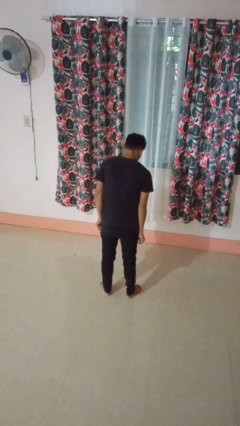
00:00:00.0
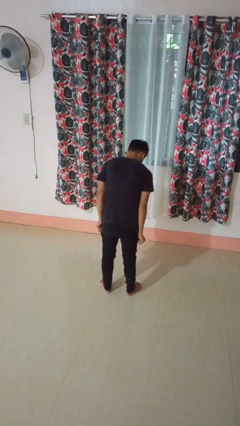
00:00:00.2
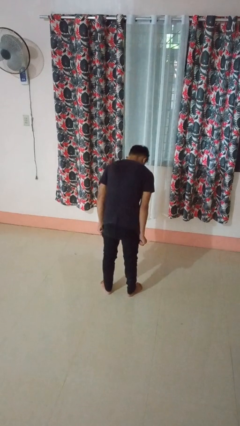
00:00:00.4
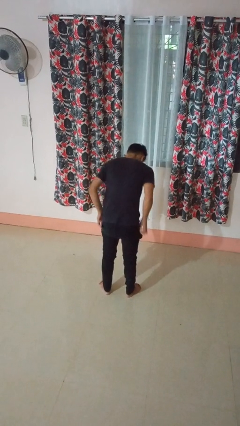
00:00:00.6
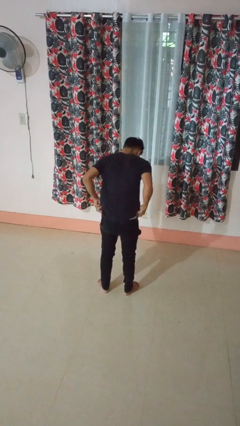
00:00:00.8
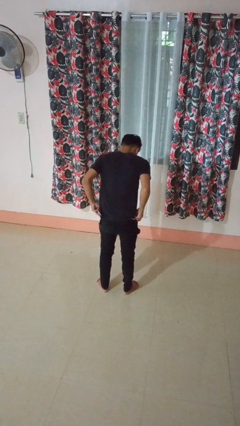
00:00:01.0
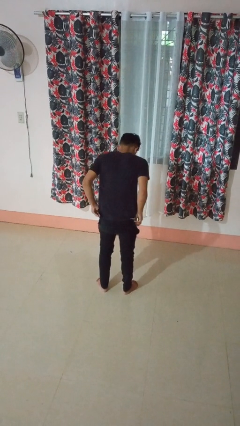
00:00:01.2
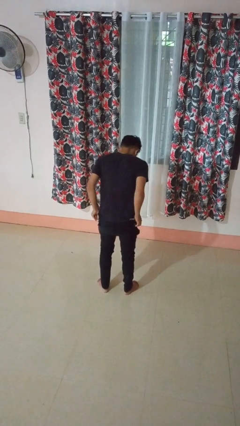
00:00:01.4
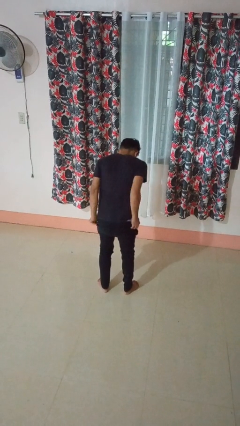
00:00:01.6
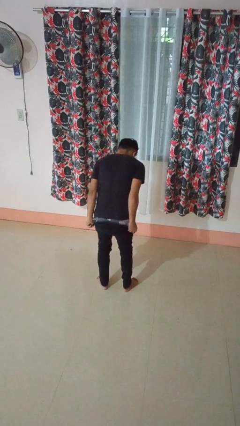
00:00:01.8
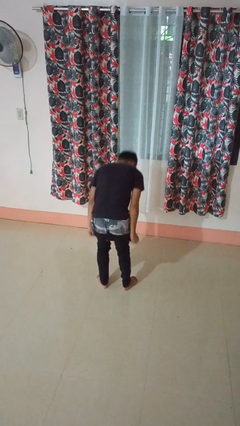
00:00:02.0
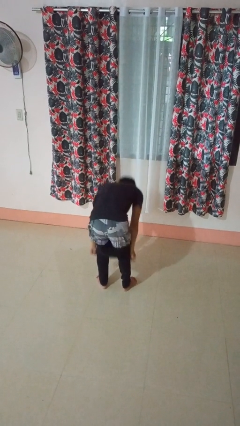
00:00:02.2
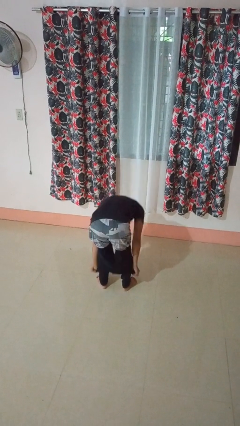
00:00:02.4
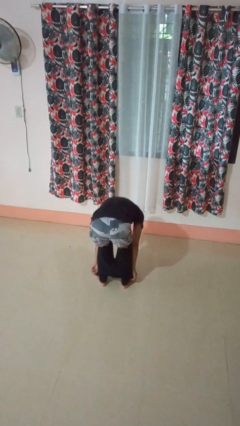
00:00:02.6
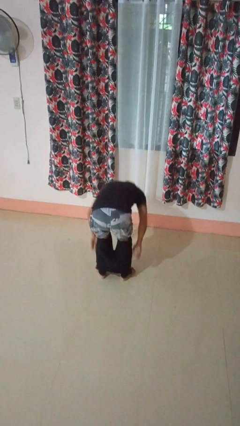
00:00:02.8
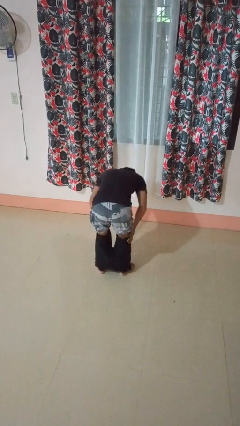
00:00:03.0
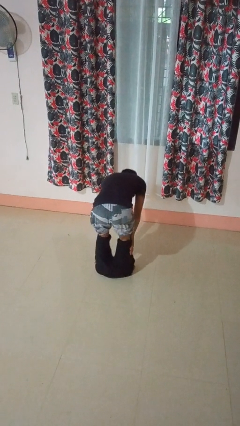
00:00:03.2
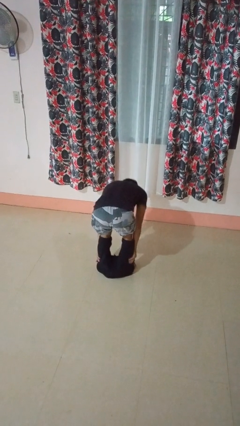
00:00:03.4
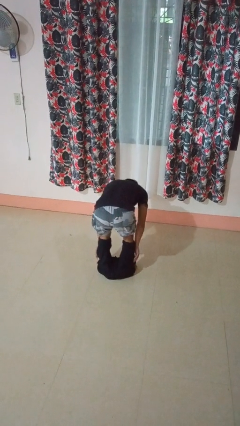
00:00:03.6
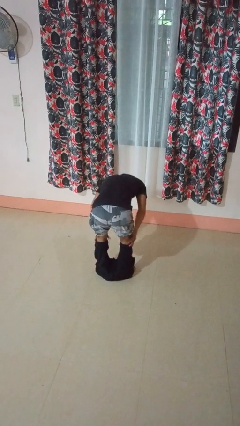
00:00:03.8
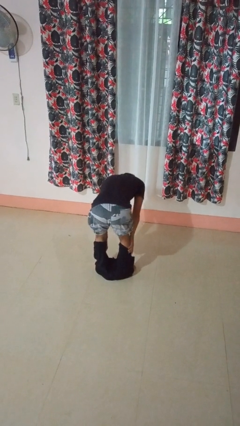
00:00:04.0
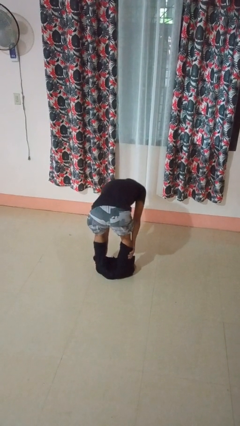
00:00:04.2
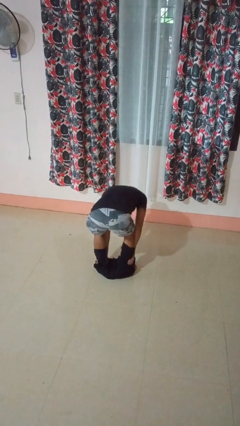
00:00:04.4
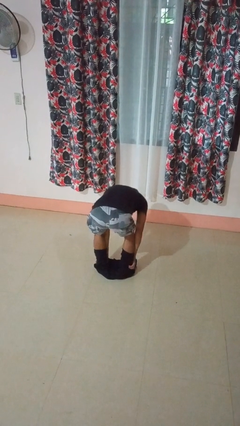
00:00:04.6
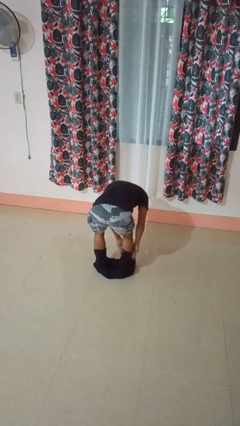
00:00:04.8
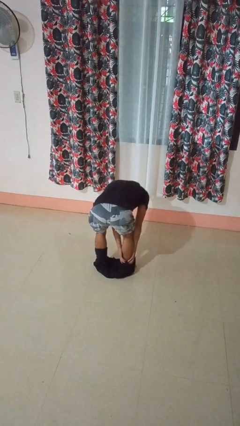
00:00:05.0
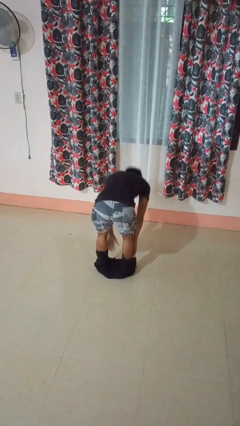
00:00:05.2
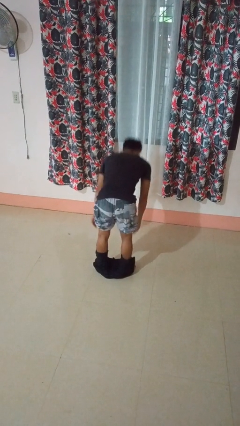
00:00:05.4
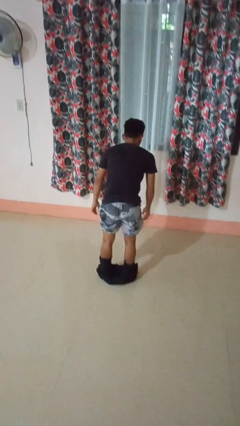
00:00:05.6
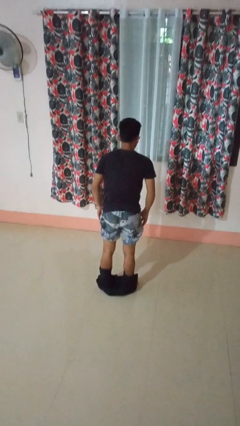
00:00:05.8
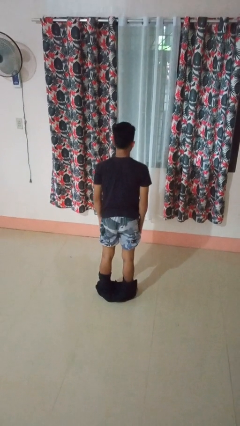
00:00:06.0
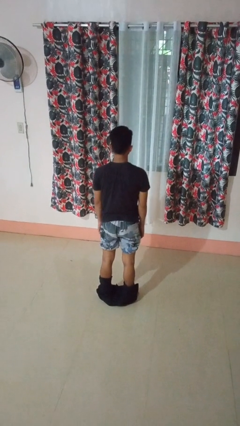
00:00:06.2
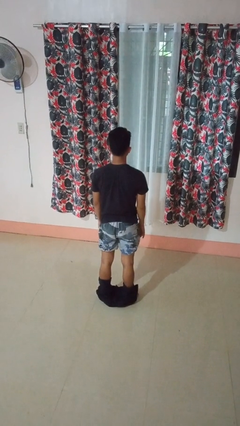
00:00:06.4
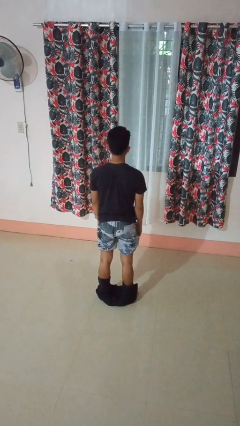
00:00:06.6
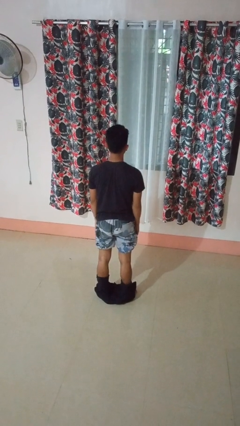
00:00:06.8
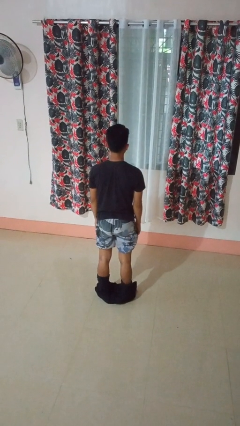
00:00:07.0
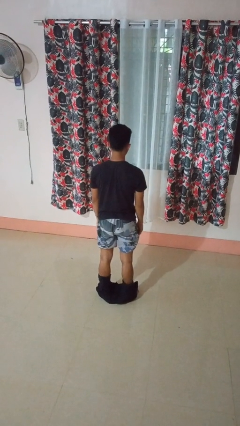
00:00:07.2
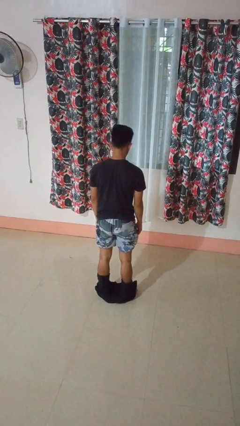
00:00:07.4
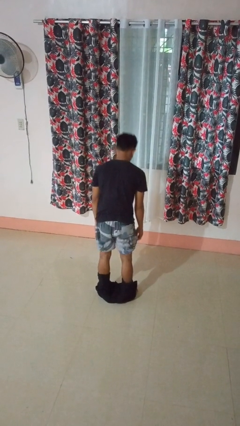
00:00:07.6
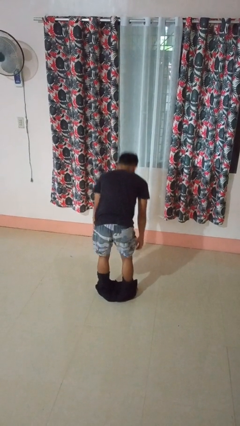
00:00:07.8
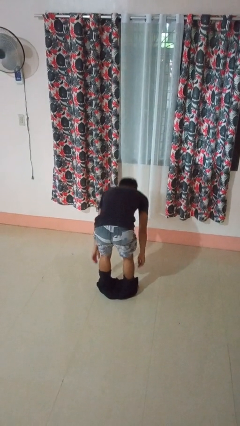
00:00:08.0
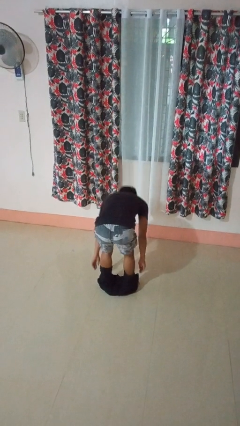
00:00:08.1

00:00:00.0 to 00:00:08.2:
person takes off pants

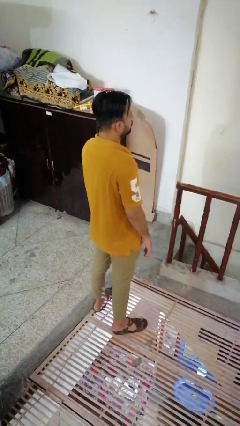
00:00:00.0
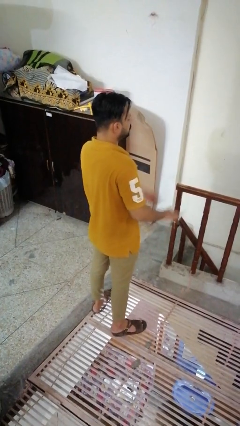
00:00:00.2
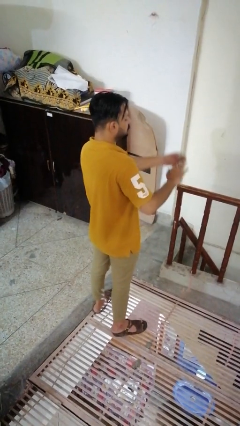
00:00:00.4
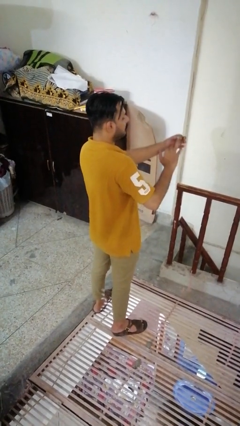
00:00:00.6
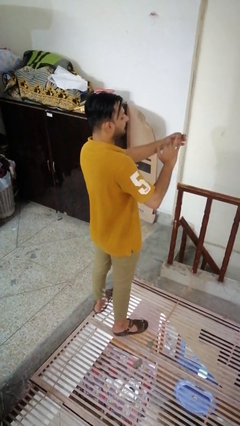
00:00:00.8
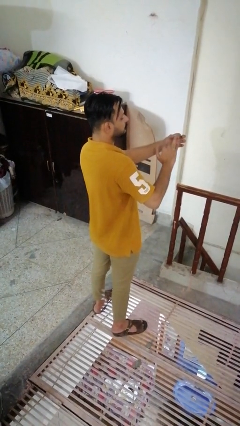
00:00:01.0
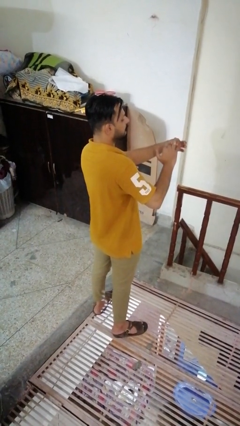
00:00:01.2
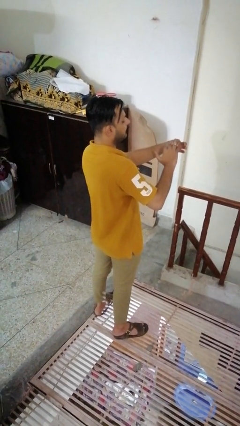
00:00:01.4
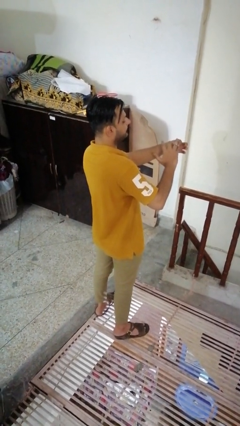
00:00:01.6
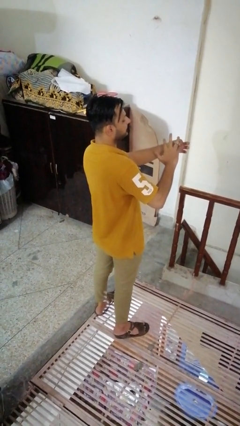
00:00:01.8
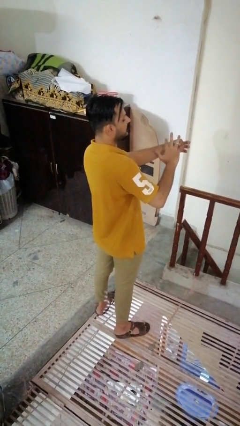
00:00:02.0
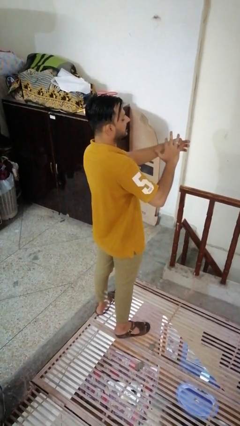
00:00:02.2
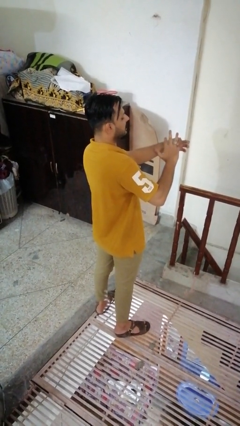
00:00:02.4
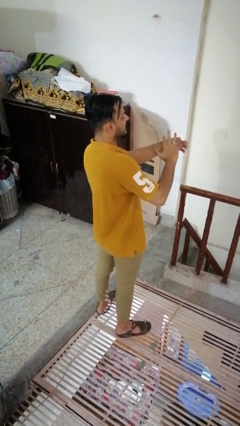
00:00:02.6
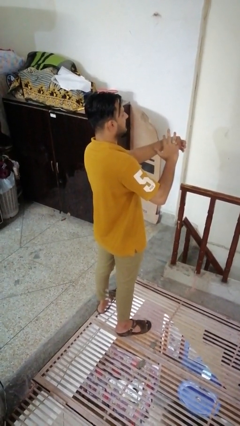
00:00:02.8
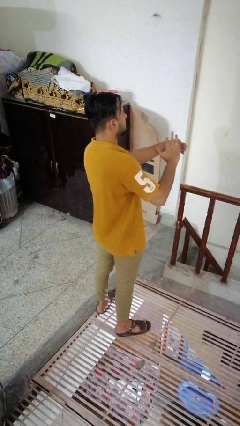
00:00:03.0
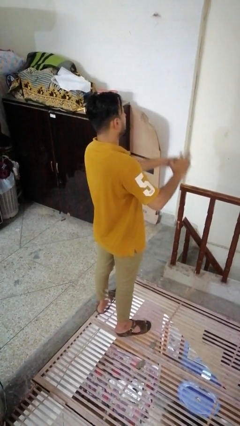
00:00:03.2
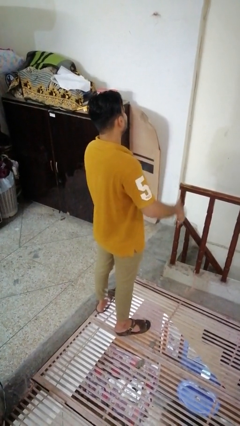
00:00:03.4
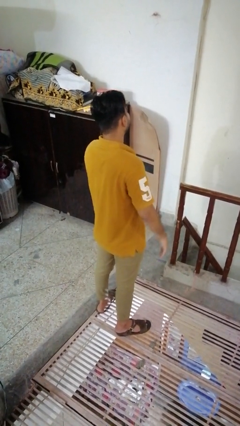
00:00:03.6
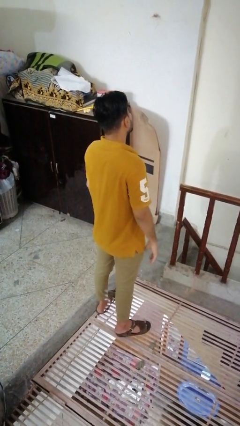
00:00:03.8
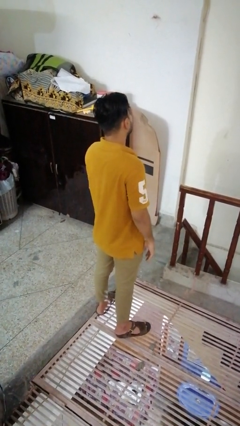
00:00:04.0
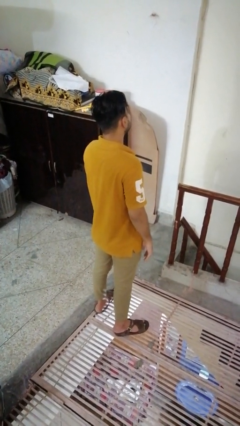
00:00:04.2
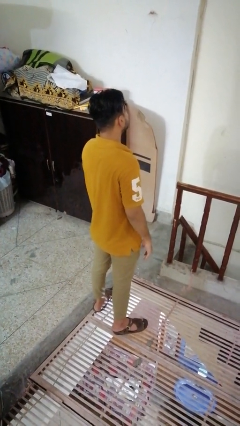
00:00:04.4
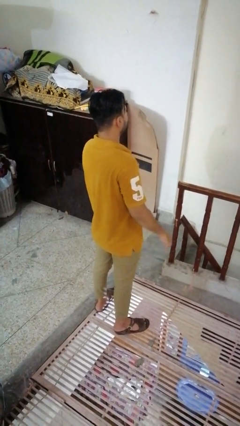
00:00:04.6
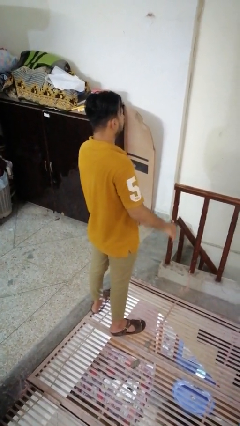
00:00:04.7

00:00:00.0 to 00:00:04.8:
person puts on ring

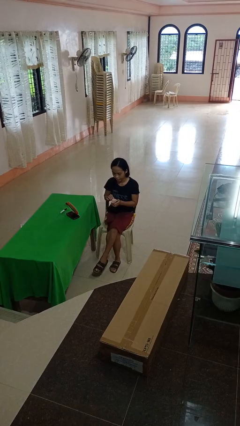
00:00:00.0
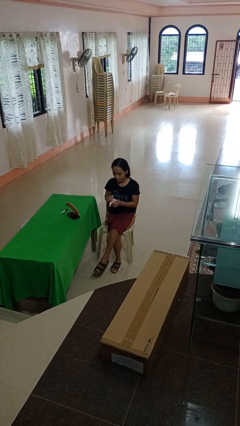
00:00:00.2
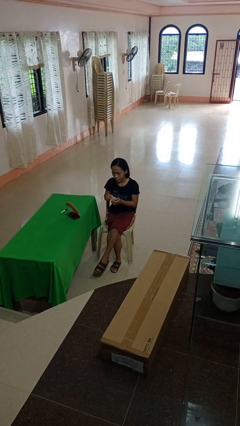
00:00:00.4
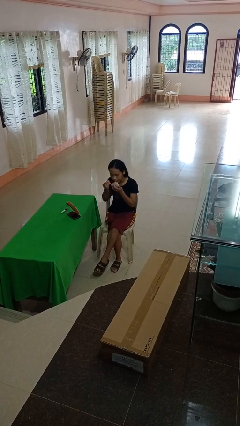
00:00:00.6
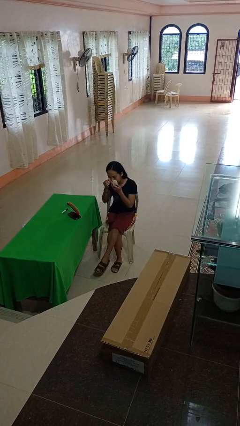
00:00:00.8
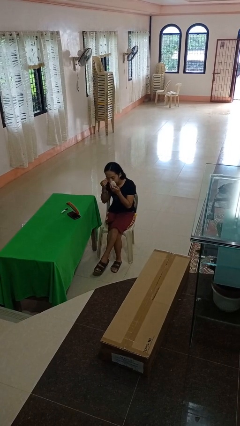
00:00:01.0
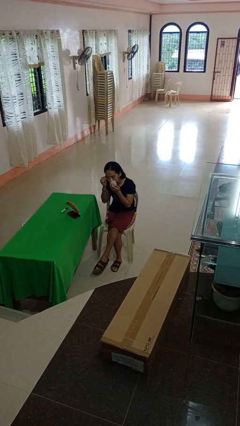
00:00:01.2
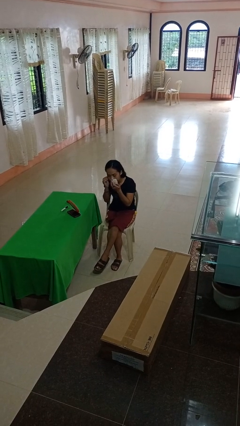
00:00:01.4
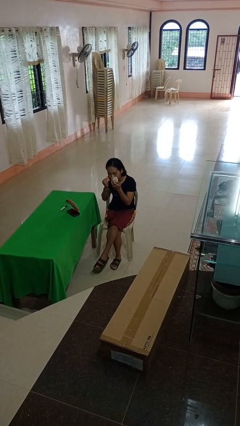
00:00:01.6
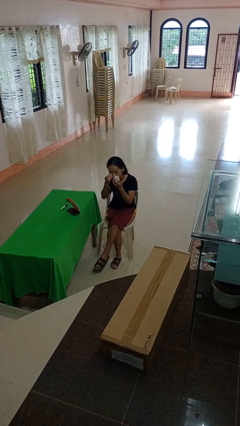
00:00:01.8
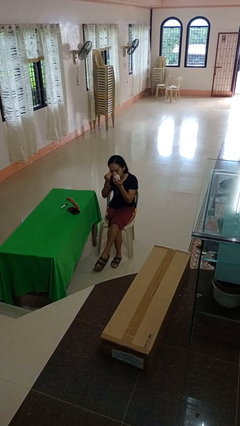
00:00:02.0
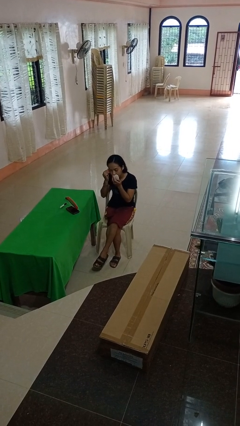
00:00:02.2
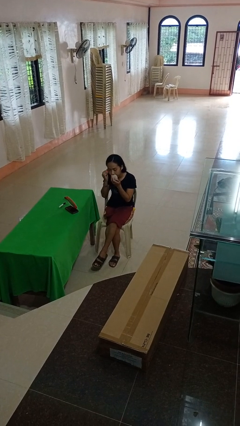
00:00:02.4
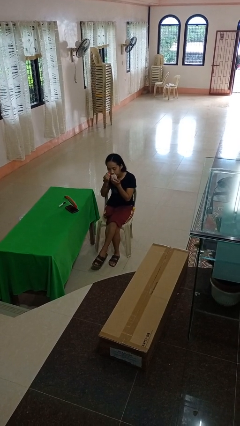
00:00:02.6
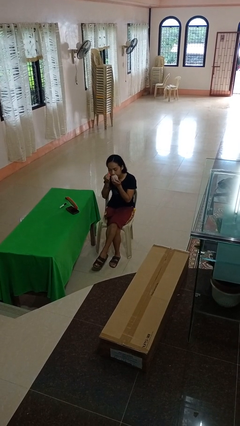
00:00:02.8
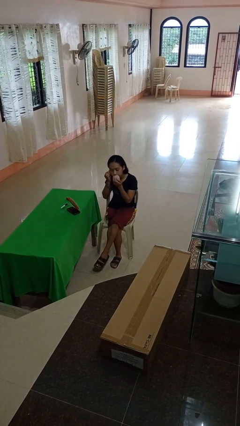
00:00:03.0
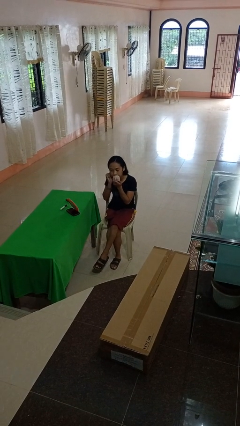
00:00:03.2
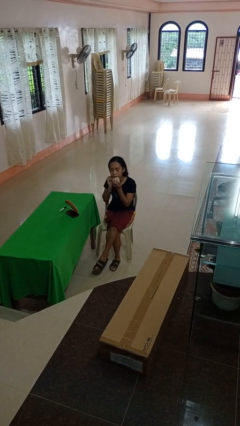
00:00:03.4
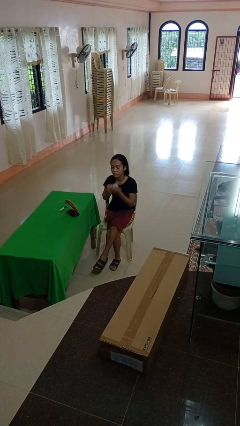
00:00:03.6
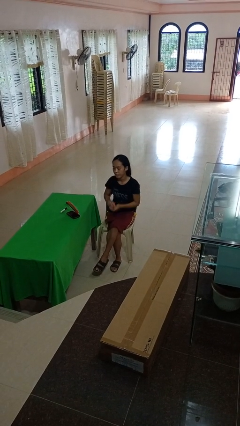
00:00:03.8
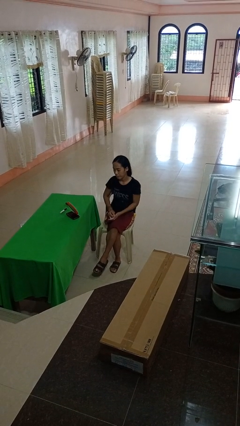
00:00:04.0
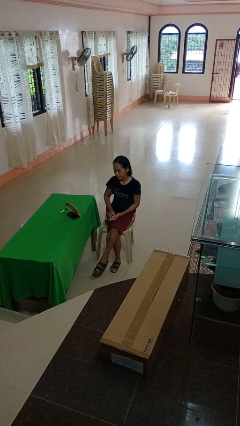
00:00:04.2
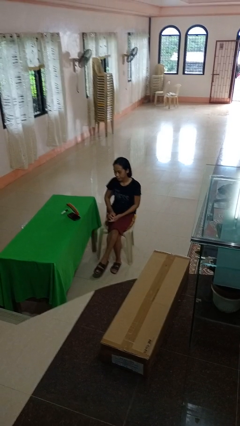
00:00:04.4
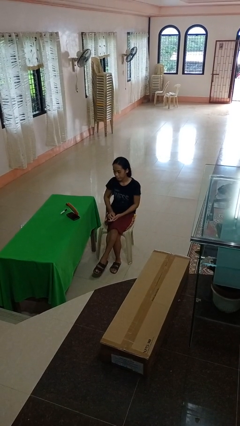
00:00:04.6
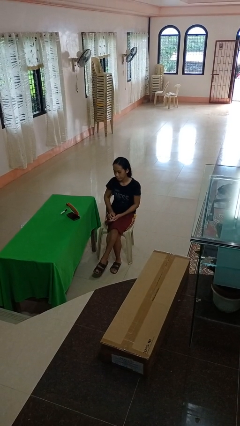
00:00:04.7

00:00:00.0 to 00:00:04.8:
person applies foundation makeup
